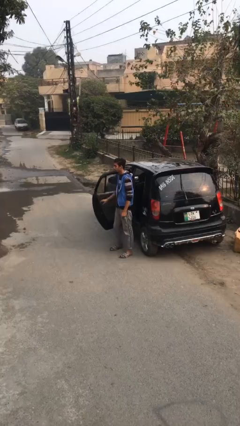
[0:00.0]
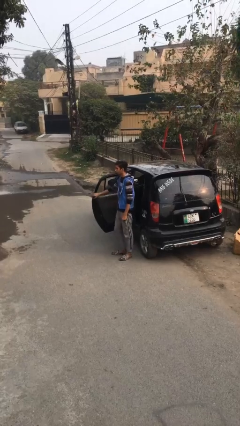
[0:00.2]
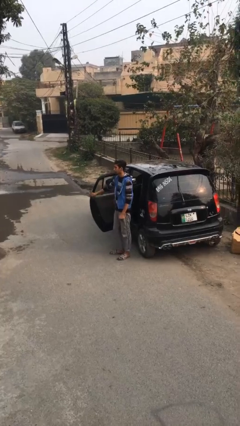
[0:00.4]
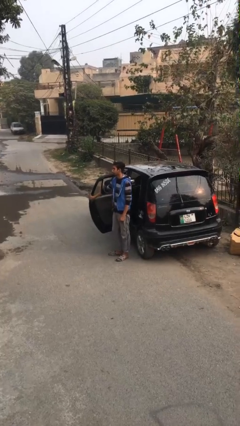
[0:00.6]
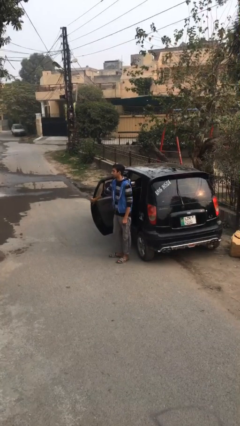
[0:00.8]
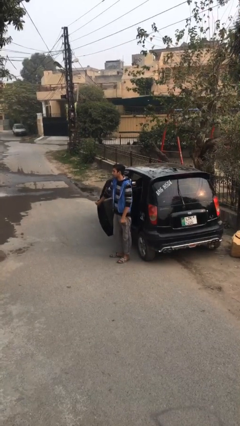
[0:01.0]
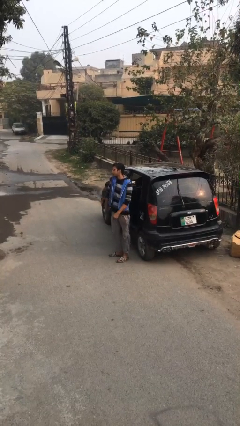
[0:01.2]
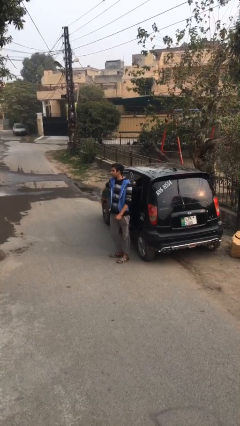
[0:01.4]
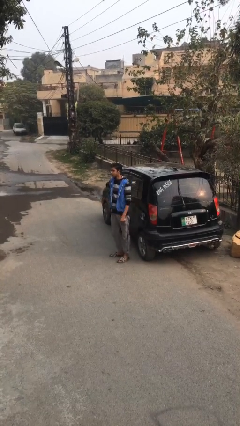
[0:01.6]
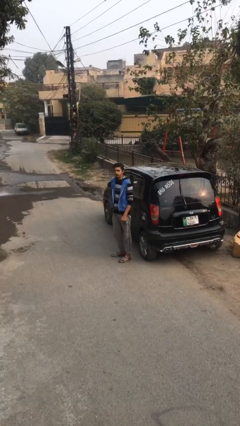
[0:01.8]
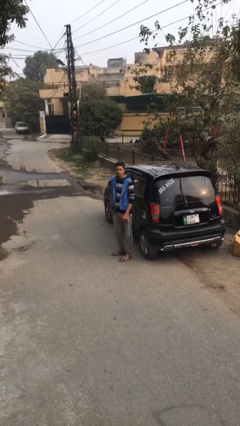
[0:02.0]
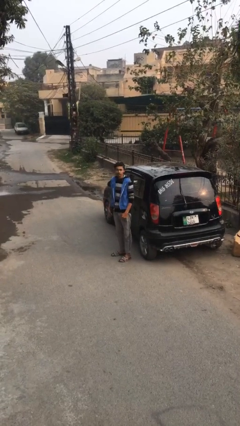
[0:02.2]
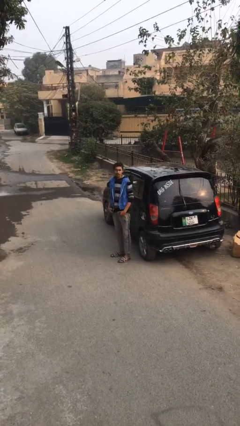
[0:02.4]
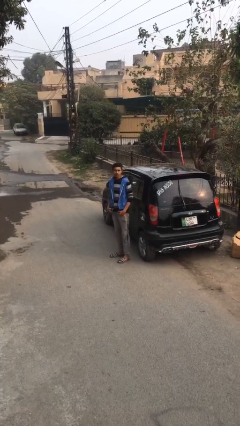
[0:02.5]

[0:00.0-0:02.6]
person closes car door

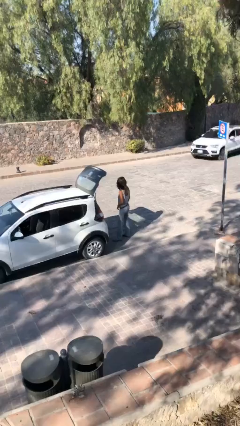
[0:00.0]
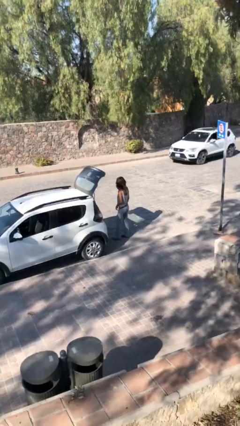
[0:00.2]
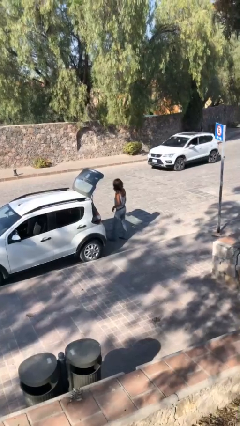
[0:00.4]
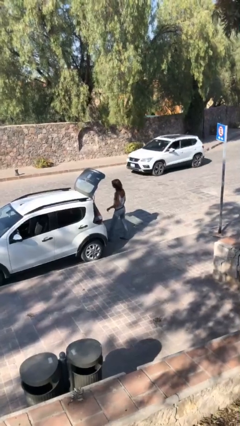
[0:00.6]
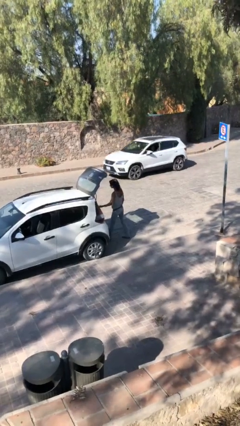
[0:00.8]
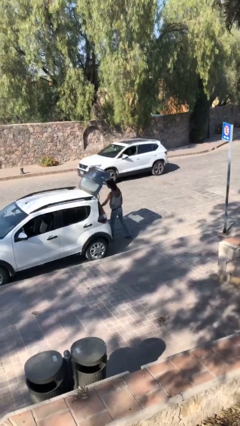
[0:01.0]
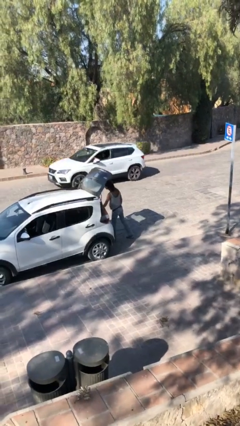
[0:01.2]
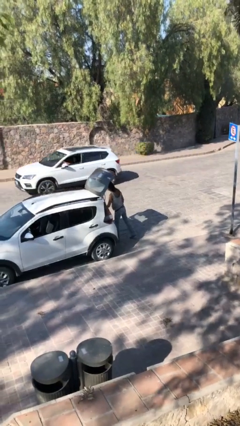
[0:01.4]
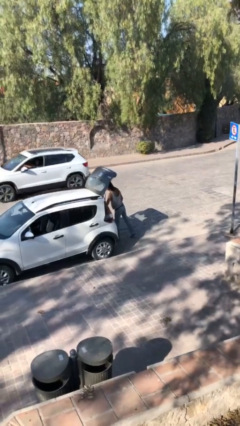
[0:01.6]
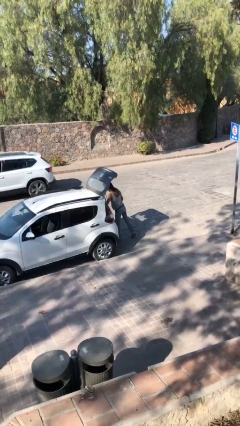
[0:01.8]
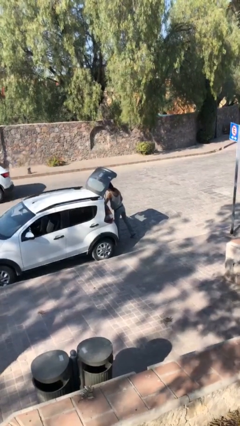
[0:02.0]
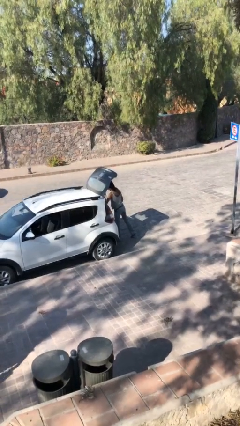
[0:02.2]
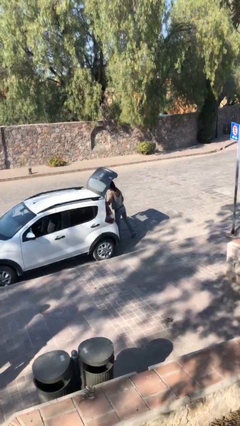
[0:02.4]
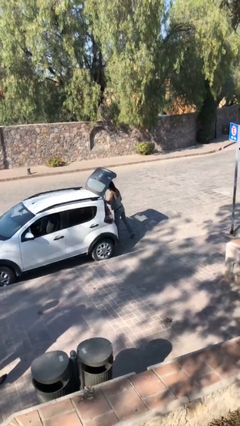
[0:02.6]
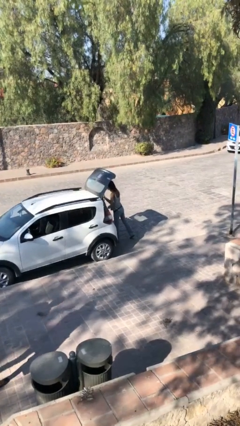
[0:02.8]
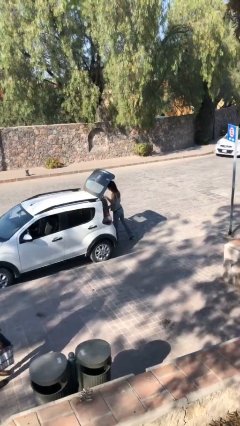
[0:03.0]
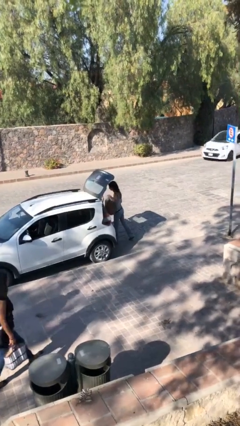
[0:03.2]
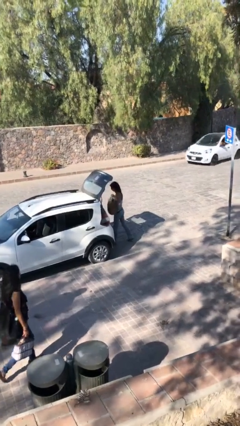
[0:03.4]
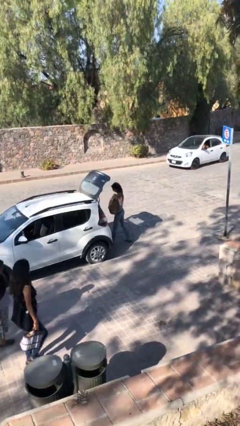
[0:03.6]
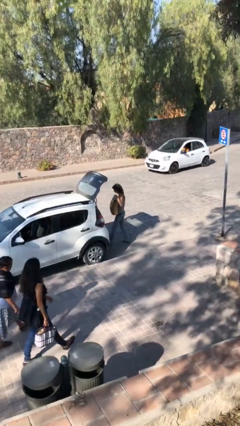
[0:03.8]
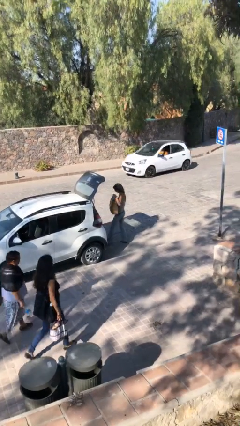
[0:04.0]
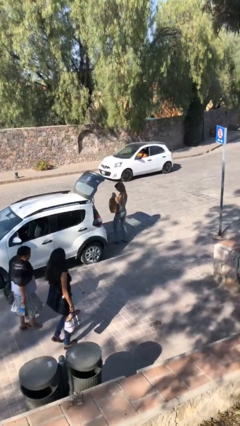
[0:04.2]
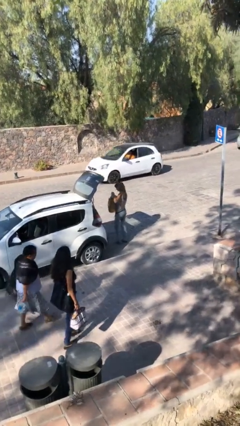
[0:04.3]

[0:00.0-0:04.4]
person unloads car

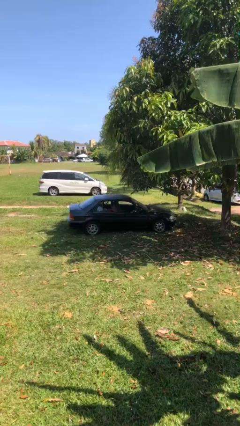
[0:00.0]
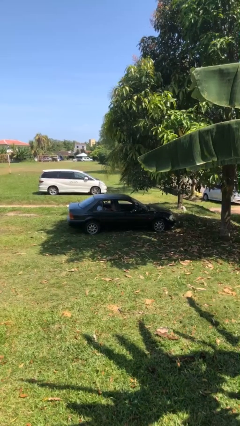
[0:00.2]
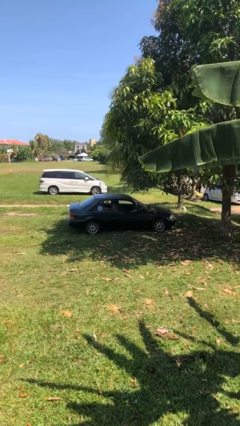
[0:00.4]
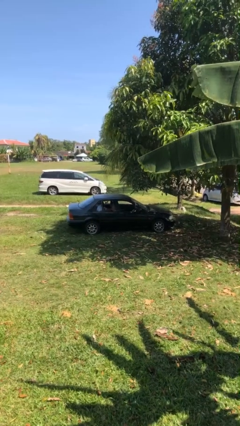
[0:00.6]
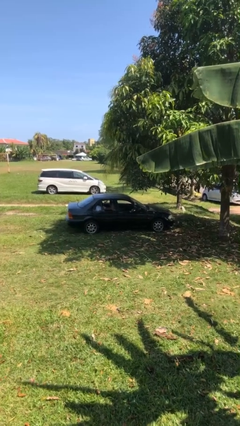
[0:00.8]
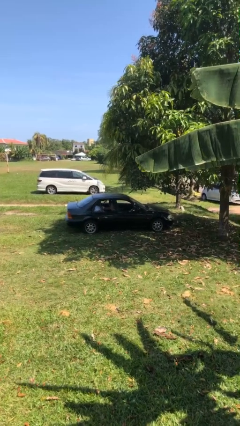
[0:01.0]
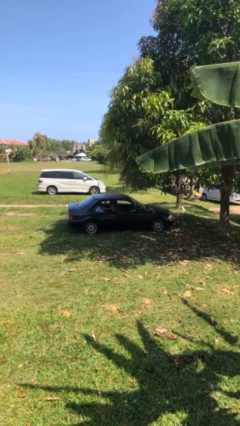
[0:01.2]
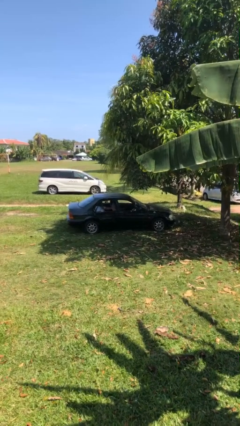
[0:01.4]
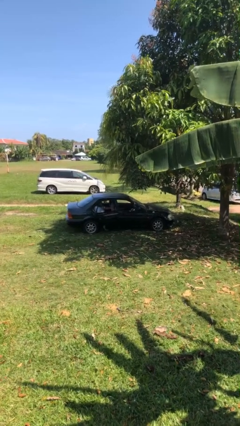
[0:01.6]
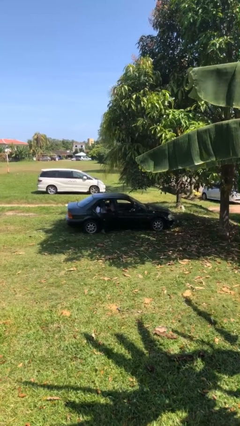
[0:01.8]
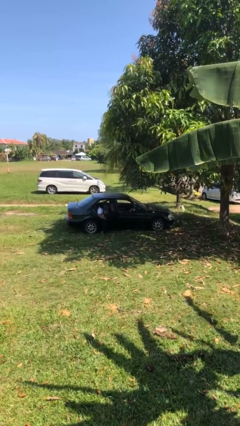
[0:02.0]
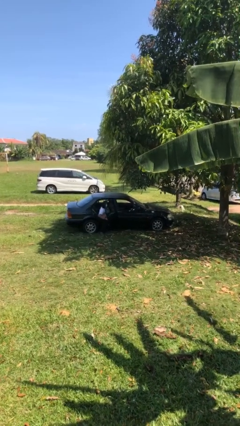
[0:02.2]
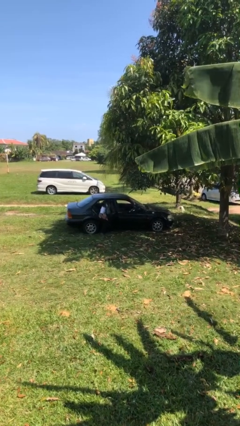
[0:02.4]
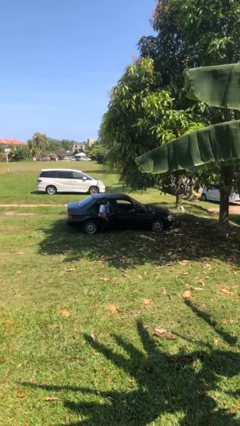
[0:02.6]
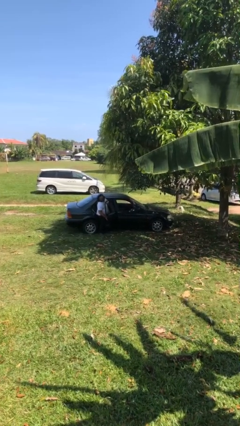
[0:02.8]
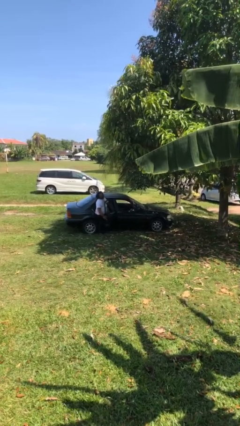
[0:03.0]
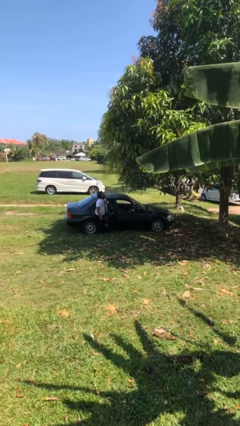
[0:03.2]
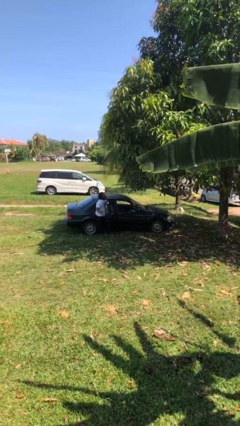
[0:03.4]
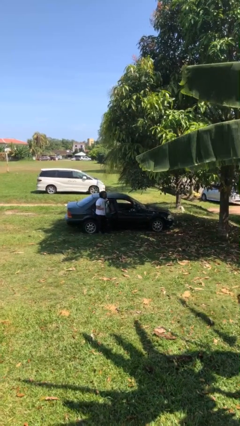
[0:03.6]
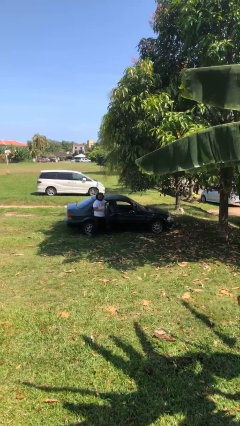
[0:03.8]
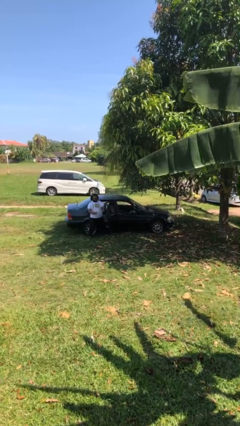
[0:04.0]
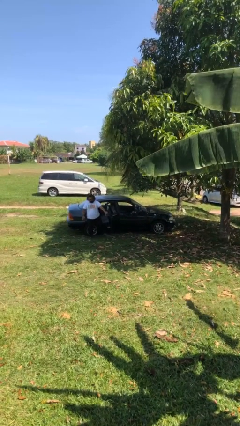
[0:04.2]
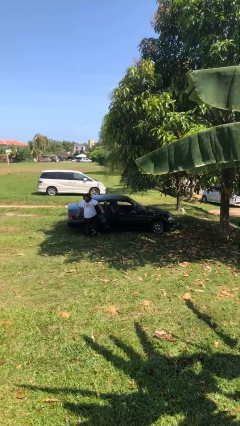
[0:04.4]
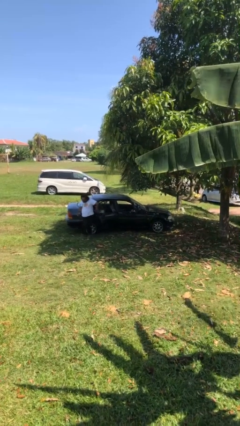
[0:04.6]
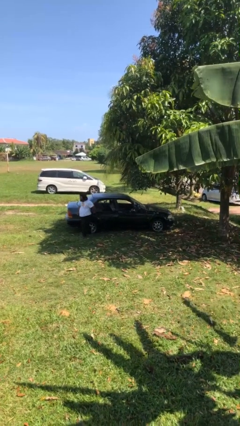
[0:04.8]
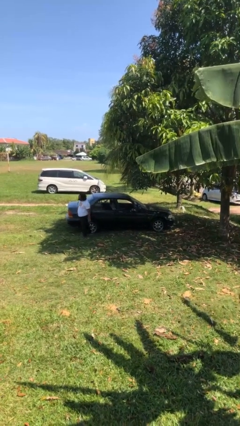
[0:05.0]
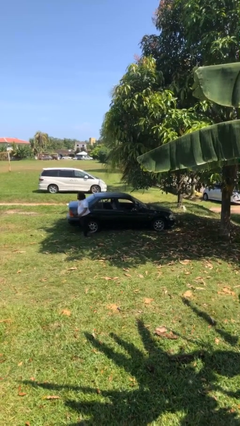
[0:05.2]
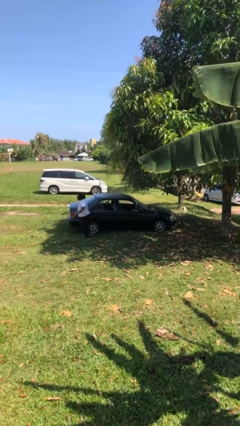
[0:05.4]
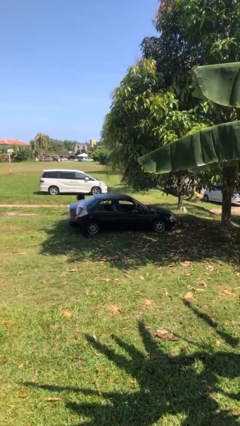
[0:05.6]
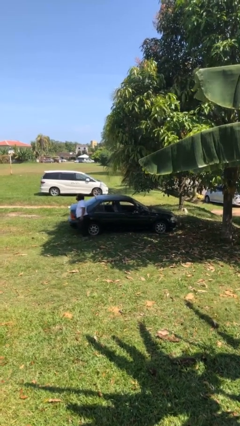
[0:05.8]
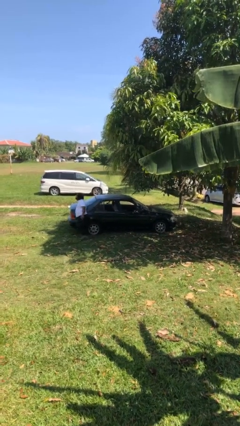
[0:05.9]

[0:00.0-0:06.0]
car drops off person

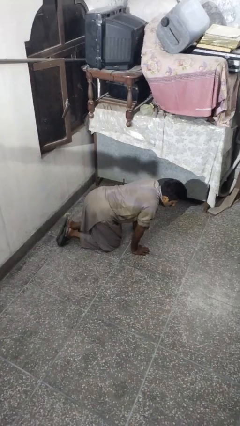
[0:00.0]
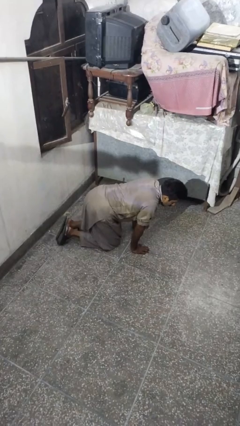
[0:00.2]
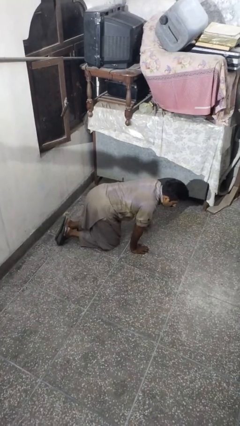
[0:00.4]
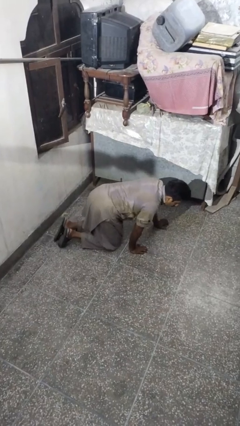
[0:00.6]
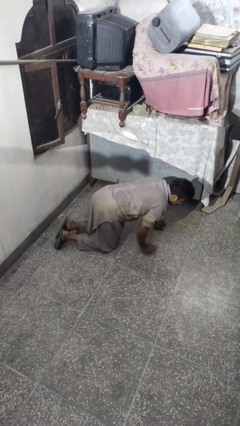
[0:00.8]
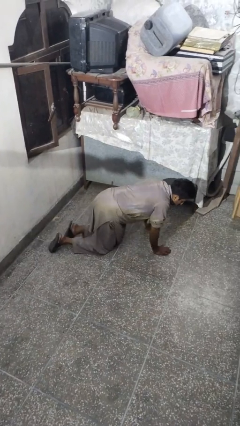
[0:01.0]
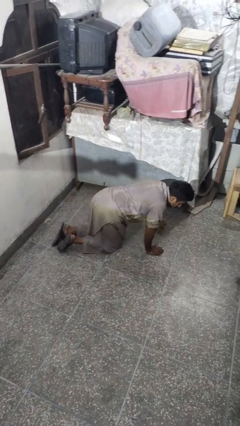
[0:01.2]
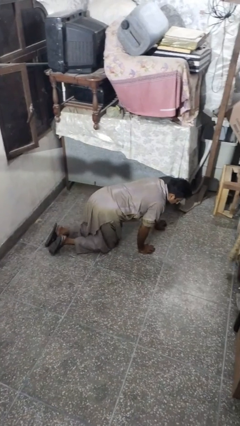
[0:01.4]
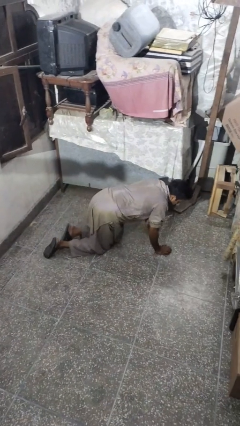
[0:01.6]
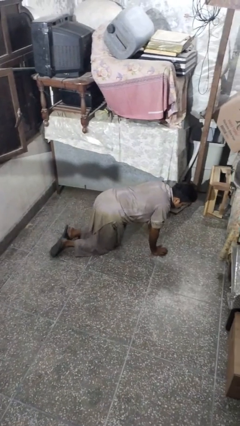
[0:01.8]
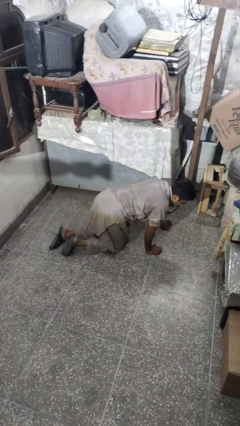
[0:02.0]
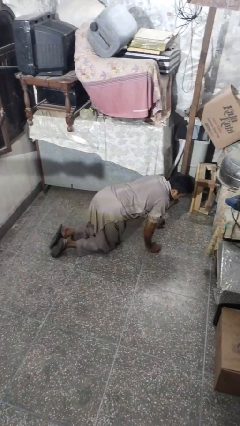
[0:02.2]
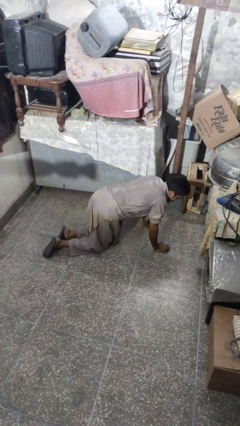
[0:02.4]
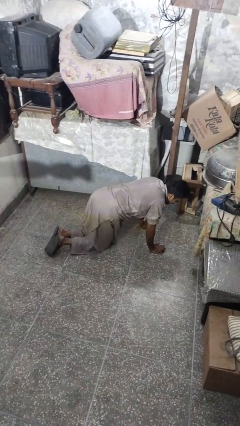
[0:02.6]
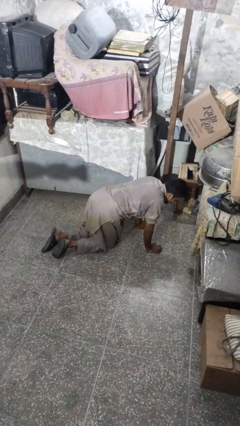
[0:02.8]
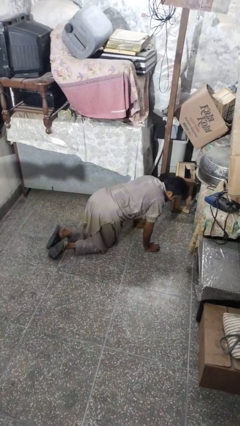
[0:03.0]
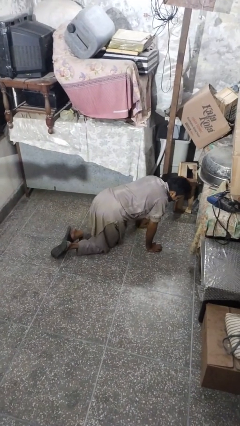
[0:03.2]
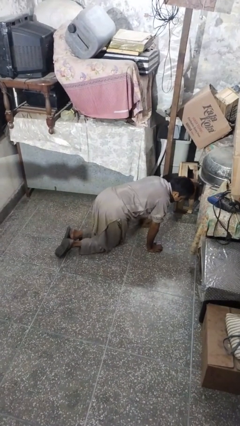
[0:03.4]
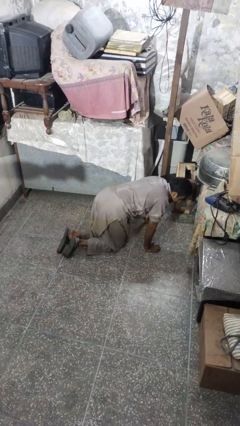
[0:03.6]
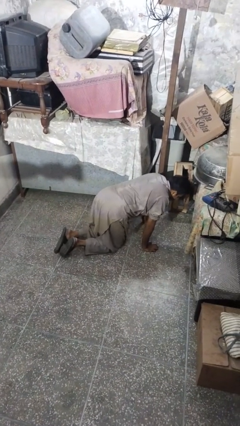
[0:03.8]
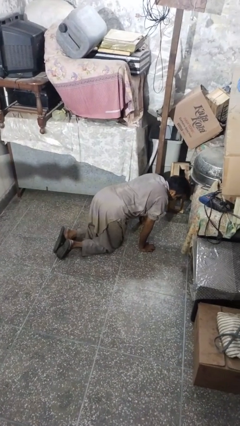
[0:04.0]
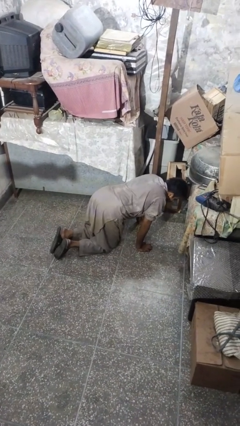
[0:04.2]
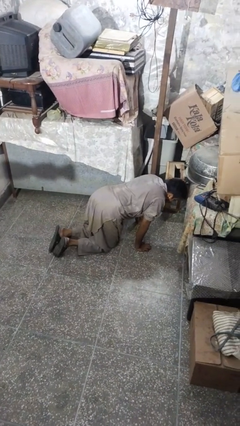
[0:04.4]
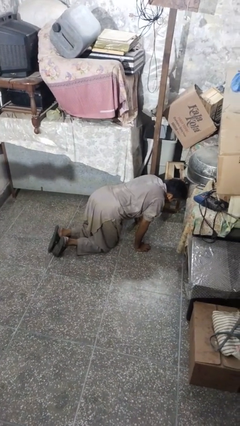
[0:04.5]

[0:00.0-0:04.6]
person crawls
